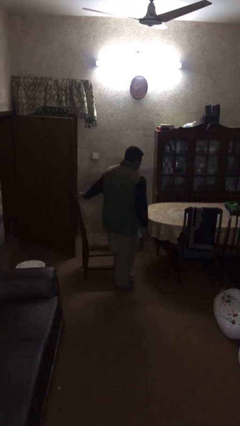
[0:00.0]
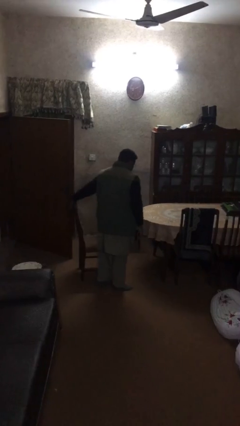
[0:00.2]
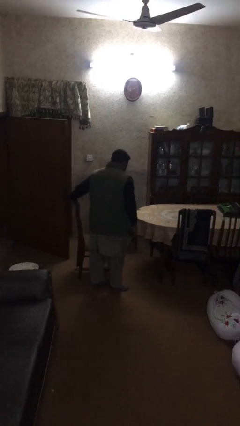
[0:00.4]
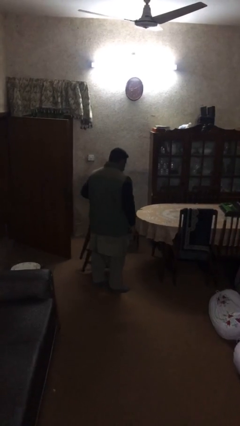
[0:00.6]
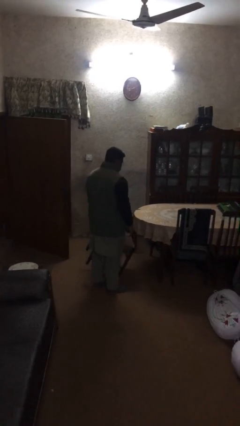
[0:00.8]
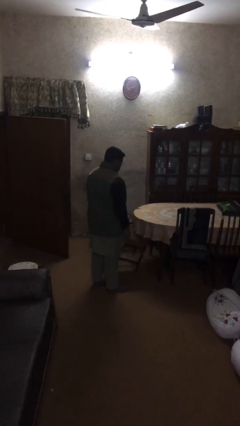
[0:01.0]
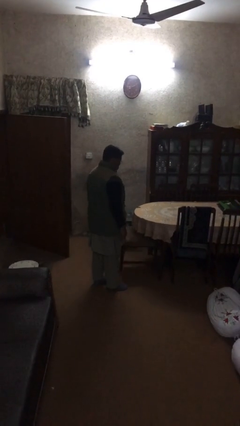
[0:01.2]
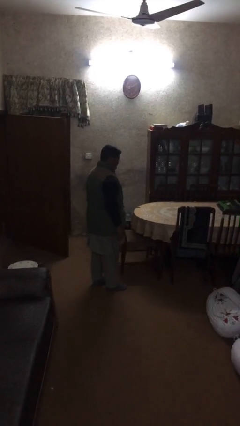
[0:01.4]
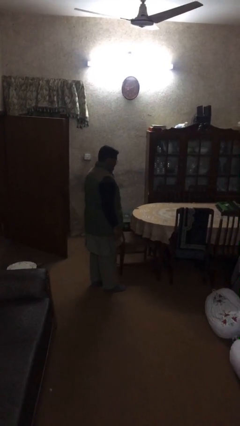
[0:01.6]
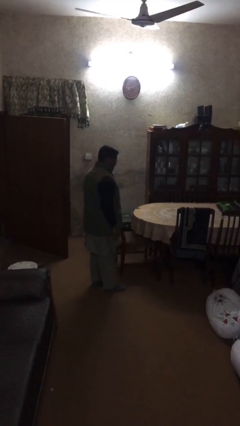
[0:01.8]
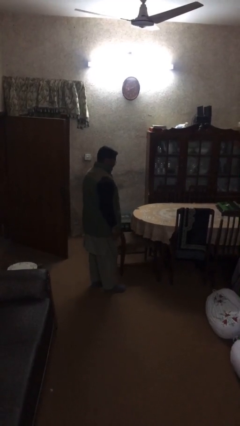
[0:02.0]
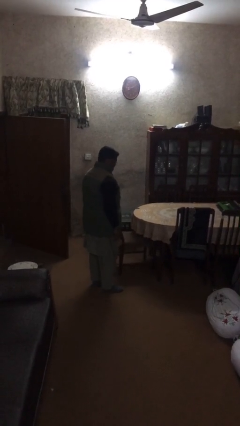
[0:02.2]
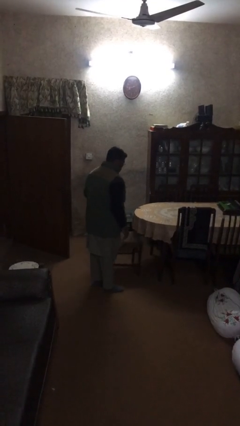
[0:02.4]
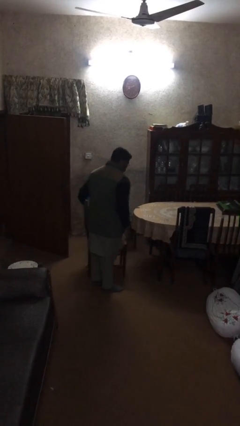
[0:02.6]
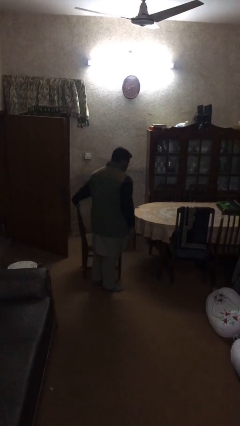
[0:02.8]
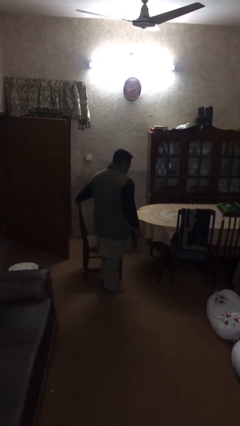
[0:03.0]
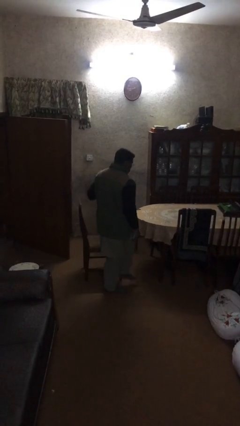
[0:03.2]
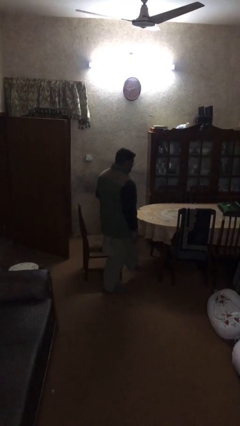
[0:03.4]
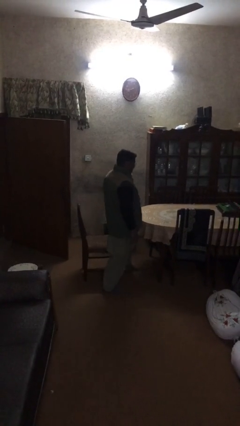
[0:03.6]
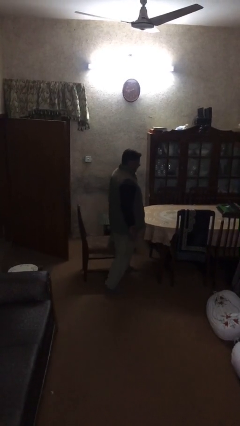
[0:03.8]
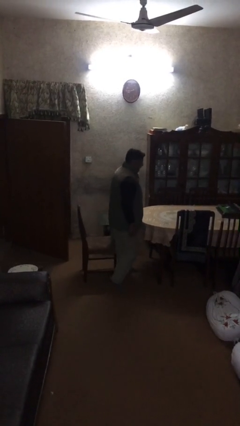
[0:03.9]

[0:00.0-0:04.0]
person stands up

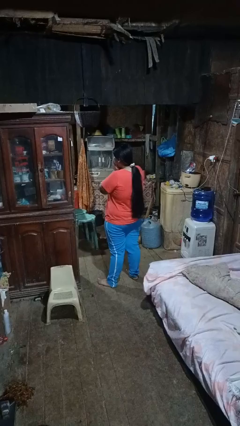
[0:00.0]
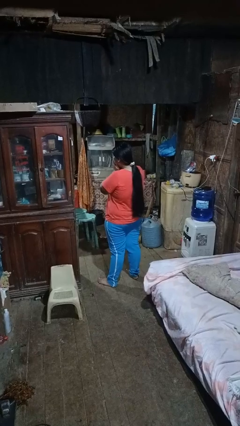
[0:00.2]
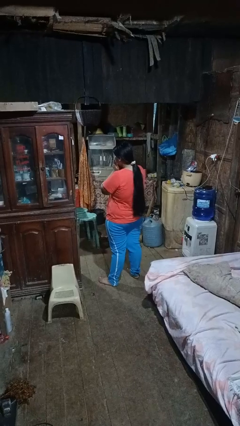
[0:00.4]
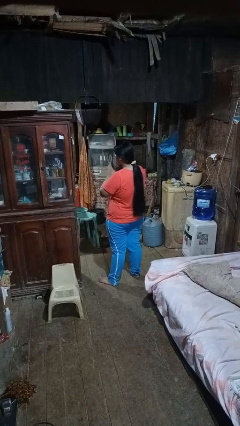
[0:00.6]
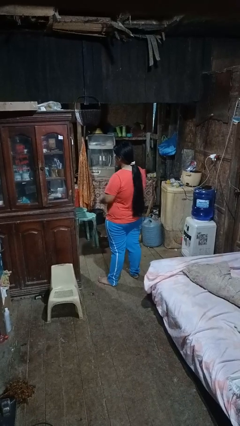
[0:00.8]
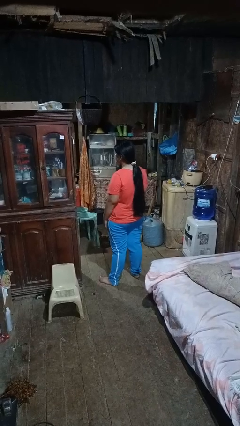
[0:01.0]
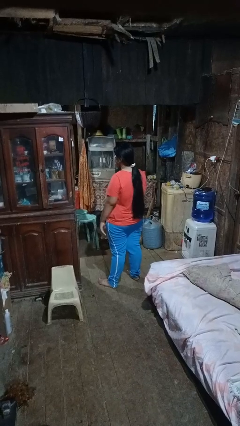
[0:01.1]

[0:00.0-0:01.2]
person yawns

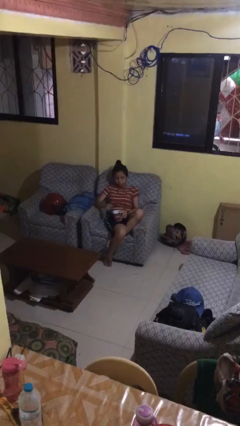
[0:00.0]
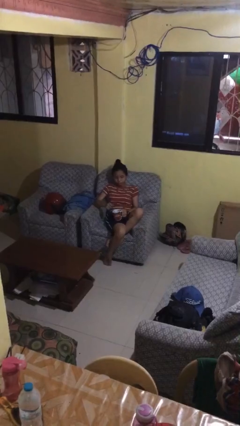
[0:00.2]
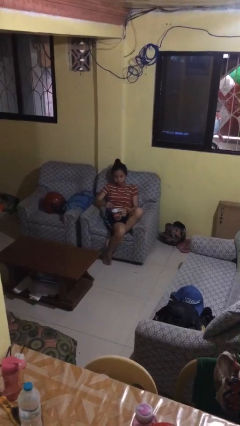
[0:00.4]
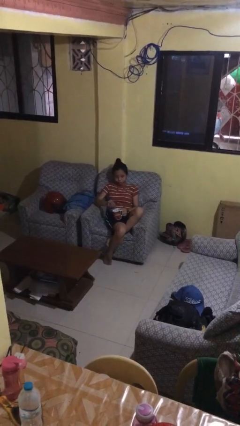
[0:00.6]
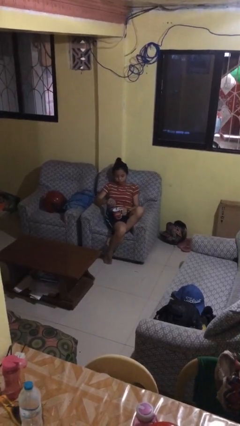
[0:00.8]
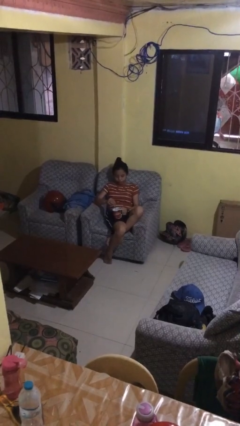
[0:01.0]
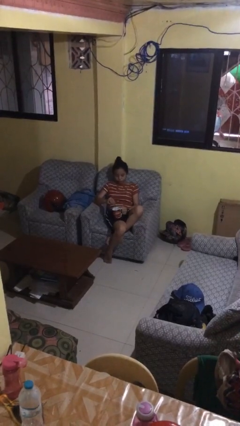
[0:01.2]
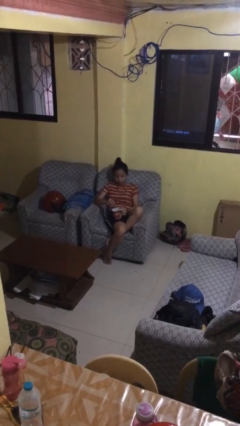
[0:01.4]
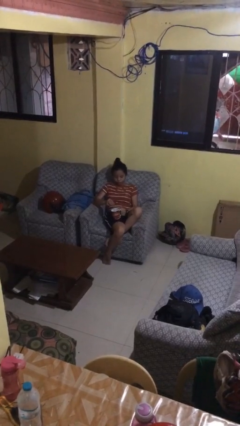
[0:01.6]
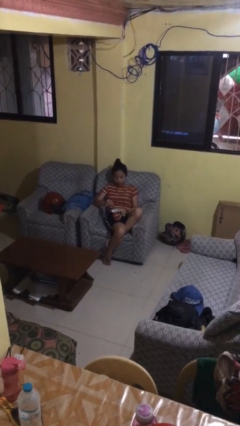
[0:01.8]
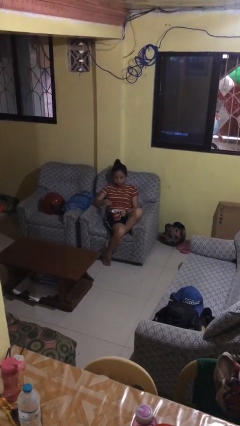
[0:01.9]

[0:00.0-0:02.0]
person stirs mug

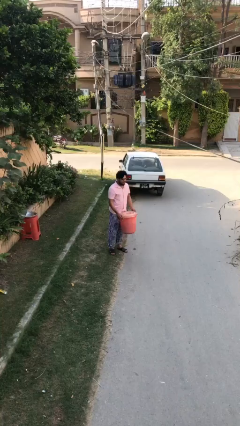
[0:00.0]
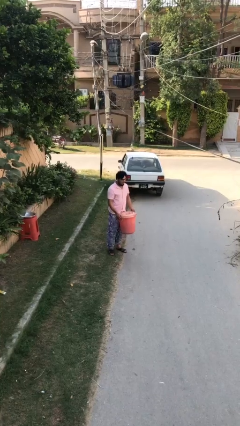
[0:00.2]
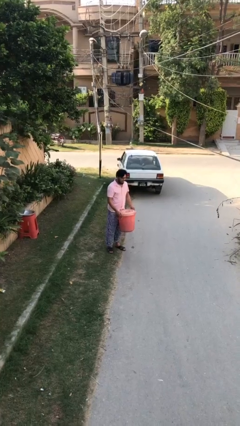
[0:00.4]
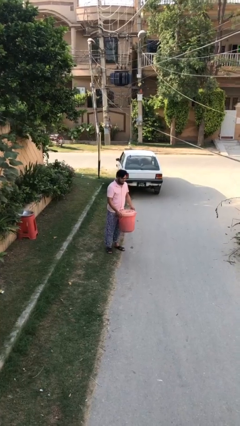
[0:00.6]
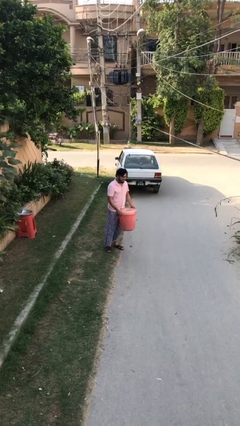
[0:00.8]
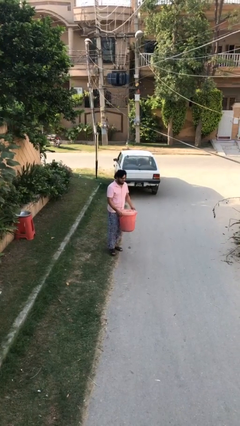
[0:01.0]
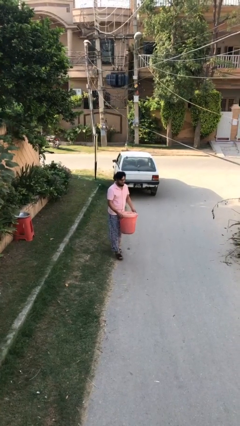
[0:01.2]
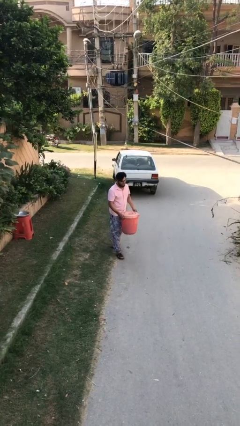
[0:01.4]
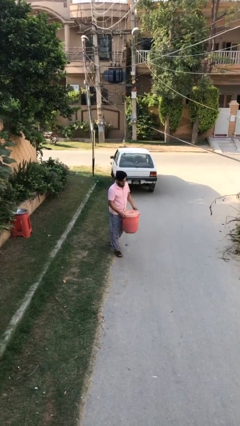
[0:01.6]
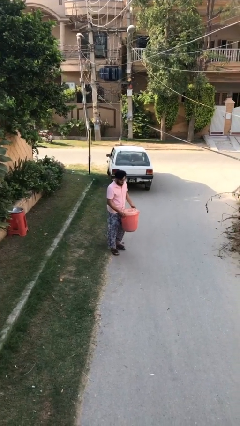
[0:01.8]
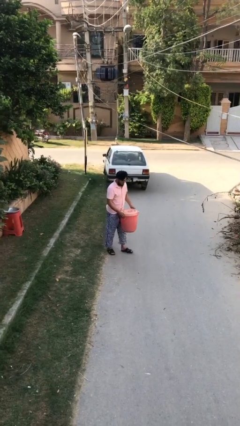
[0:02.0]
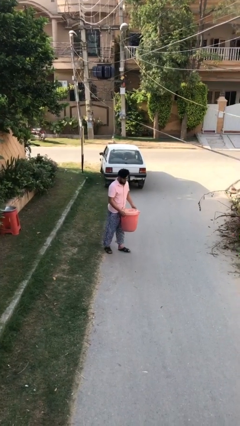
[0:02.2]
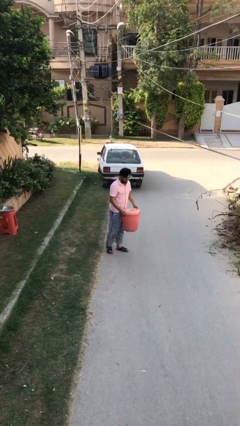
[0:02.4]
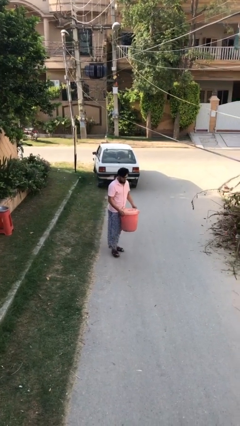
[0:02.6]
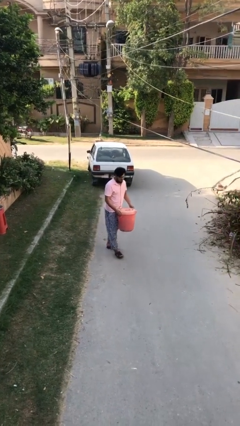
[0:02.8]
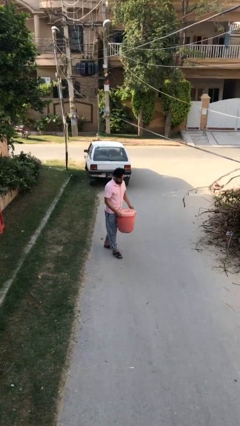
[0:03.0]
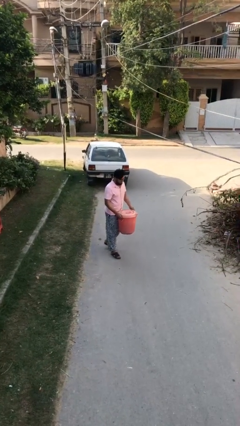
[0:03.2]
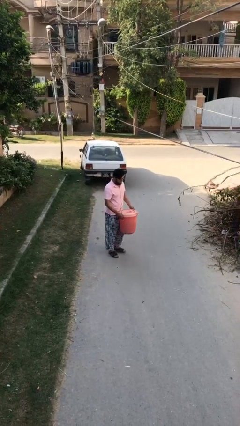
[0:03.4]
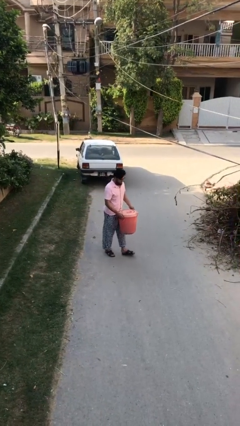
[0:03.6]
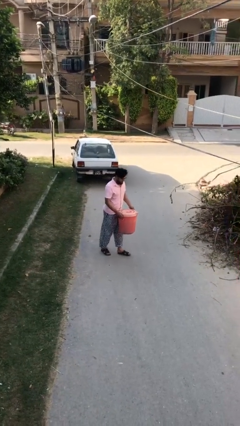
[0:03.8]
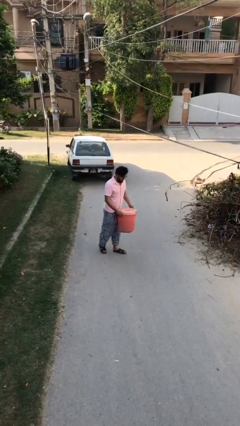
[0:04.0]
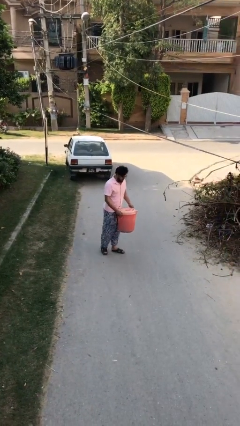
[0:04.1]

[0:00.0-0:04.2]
person carries heavy object

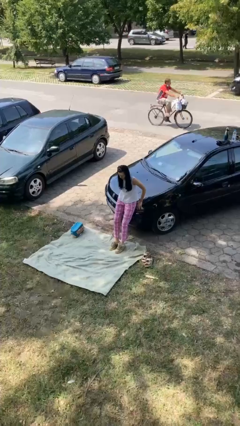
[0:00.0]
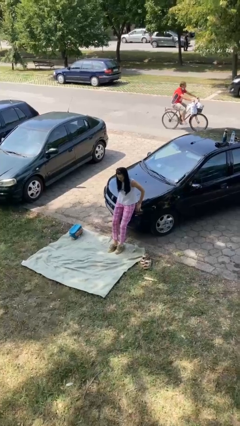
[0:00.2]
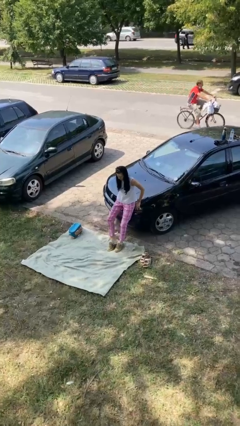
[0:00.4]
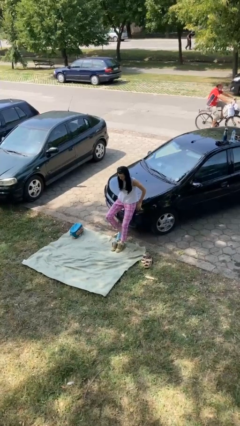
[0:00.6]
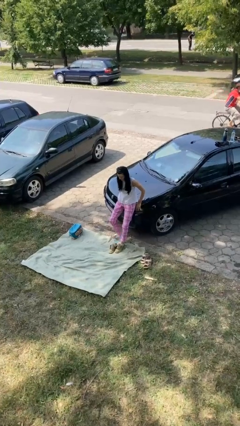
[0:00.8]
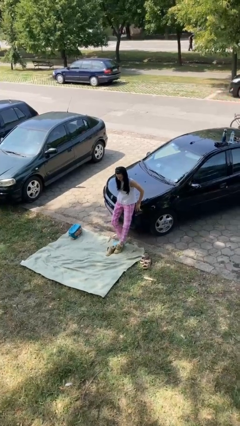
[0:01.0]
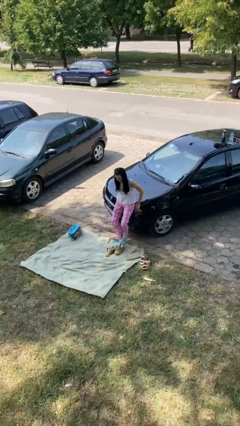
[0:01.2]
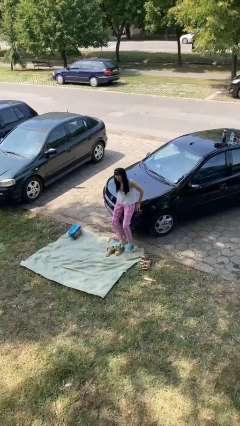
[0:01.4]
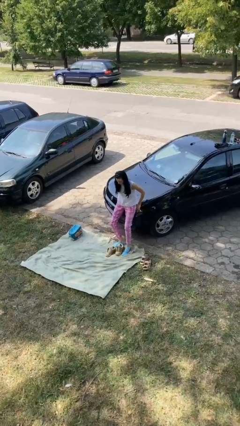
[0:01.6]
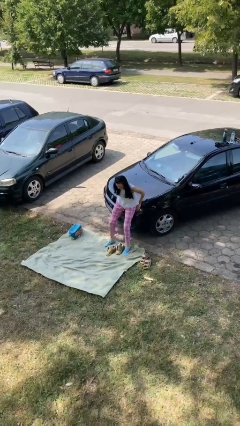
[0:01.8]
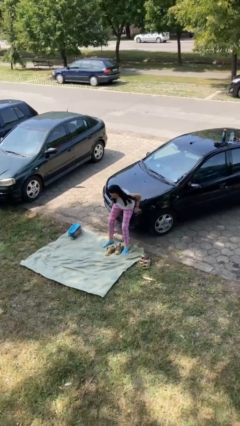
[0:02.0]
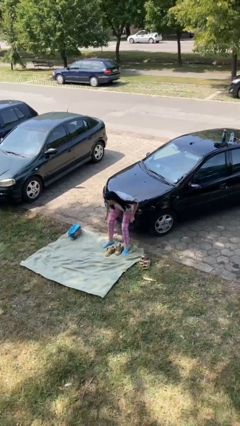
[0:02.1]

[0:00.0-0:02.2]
person takes off shoes

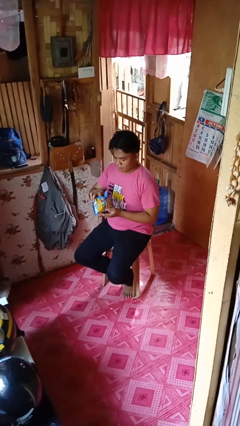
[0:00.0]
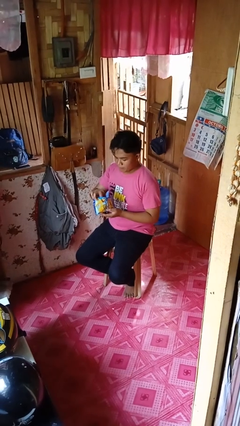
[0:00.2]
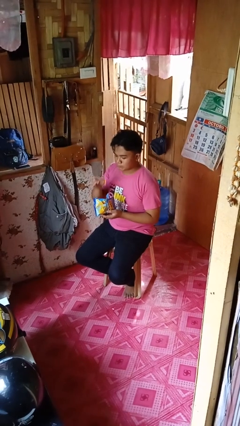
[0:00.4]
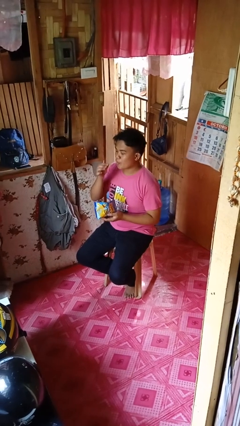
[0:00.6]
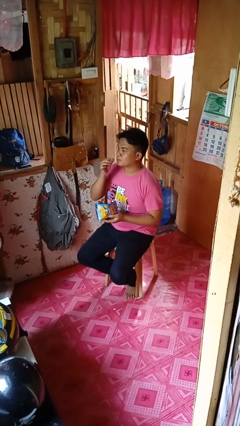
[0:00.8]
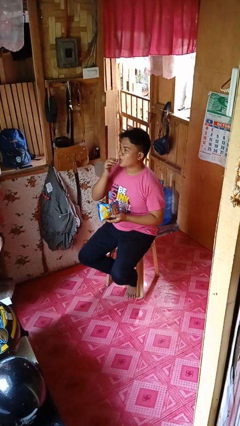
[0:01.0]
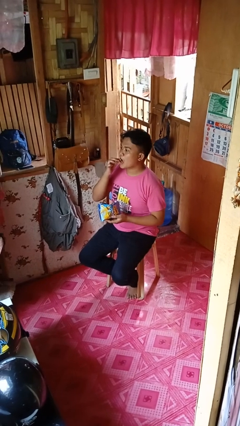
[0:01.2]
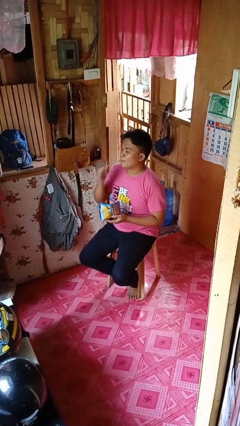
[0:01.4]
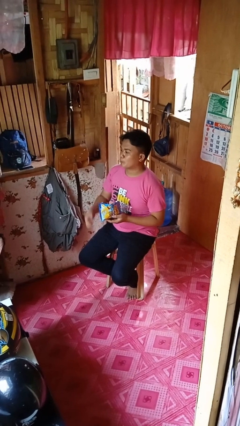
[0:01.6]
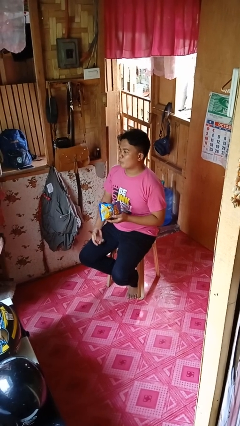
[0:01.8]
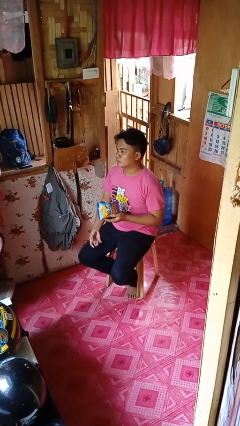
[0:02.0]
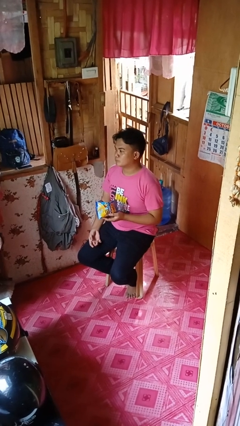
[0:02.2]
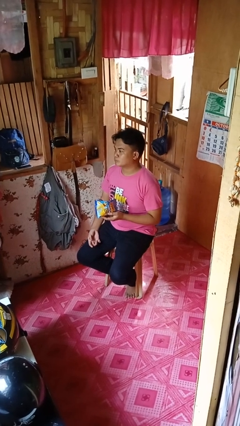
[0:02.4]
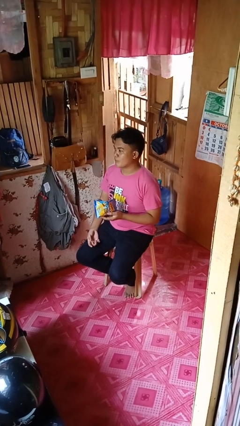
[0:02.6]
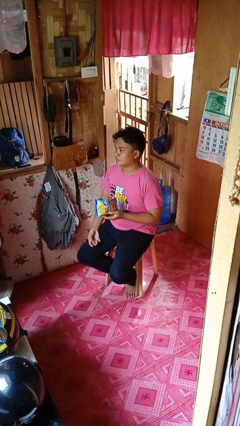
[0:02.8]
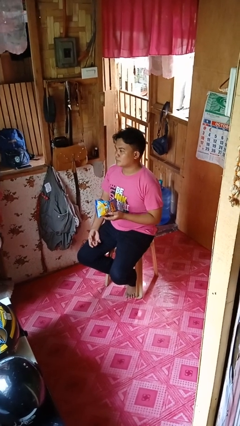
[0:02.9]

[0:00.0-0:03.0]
person eats snack from bag

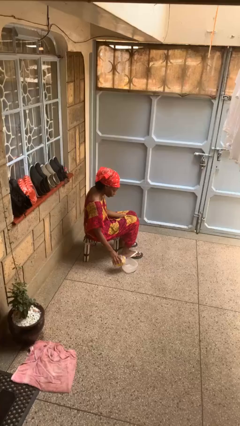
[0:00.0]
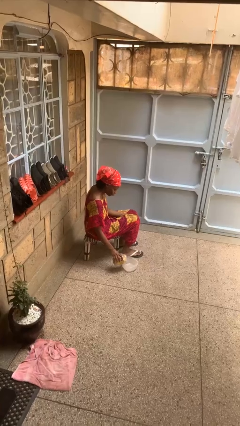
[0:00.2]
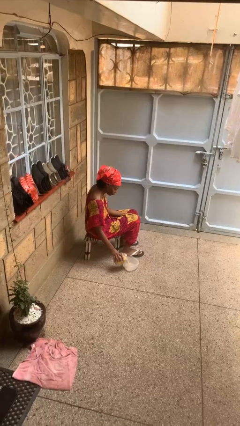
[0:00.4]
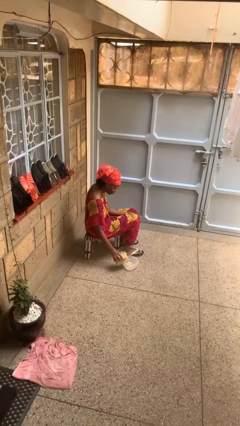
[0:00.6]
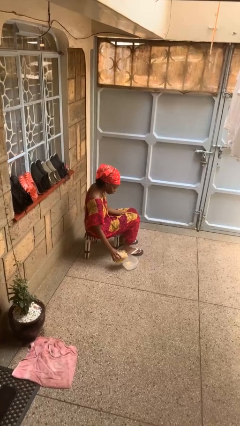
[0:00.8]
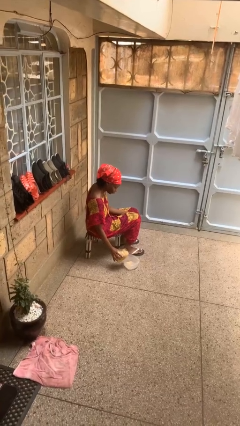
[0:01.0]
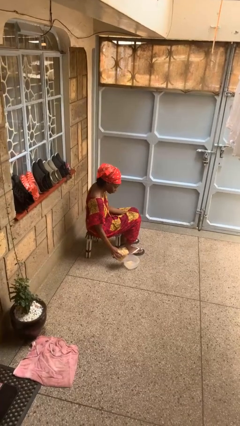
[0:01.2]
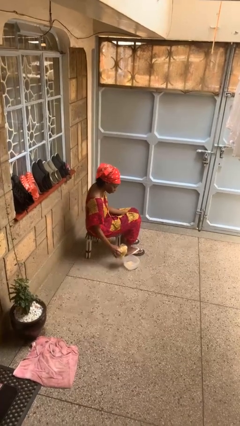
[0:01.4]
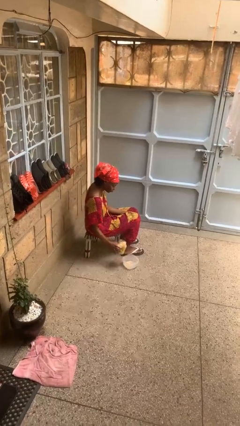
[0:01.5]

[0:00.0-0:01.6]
person pours into bowl
